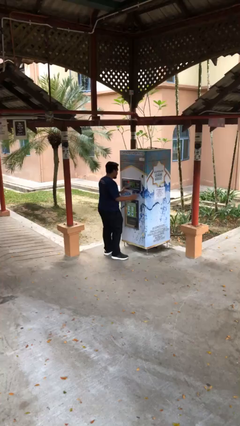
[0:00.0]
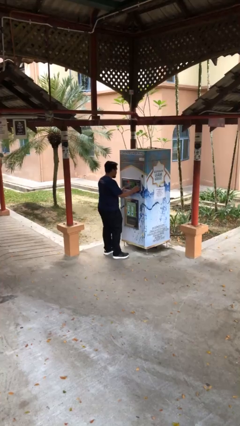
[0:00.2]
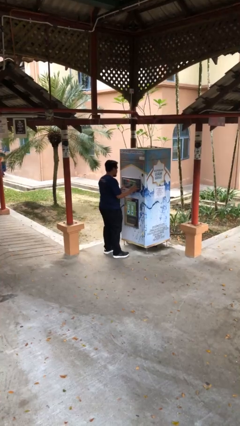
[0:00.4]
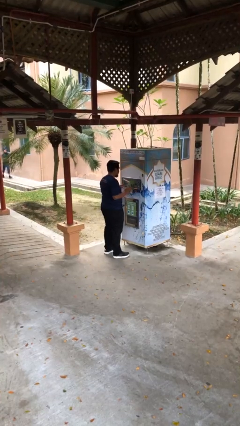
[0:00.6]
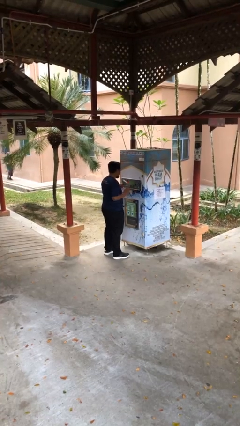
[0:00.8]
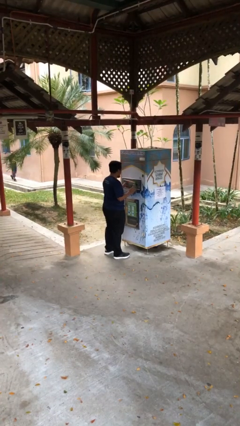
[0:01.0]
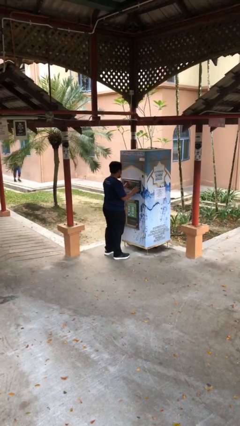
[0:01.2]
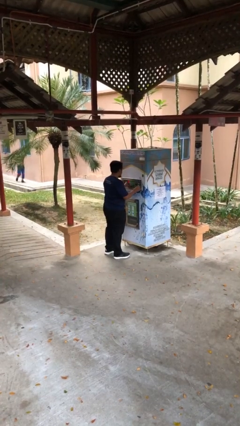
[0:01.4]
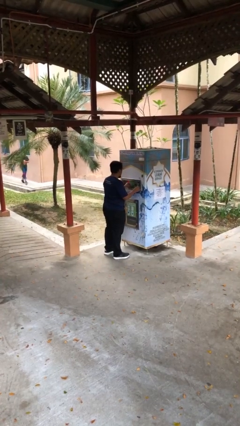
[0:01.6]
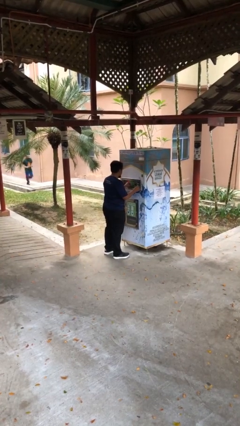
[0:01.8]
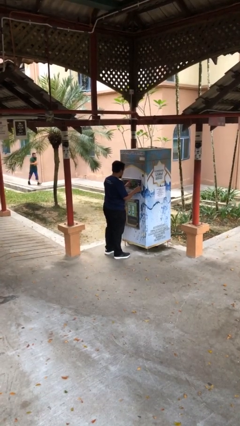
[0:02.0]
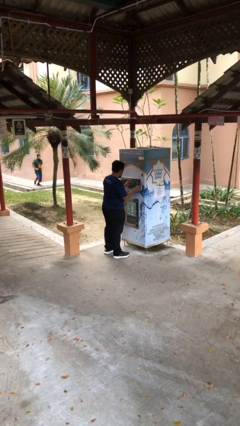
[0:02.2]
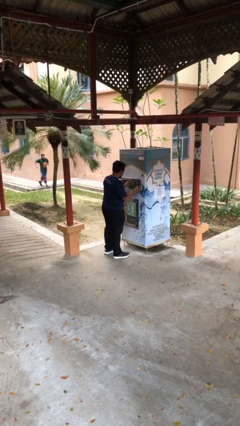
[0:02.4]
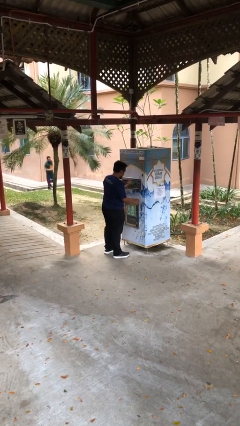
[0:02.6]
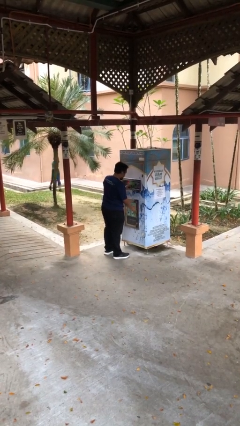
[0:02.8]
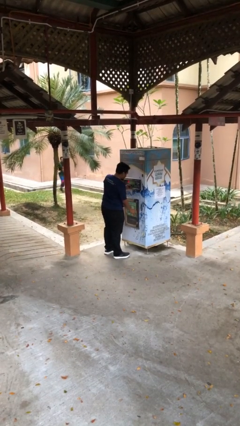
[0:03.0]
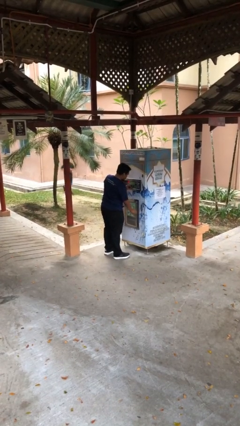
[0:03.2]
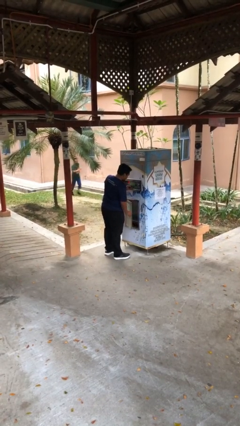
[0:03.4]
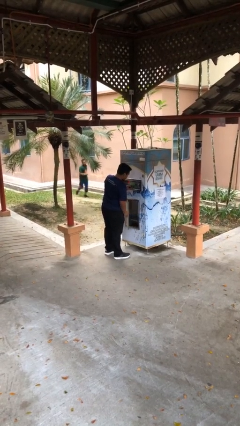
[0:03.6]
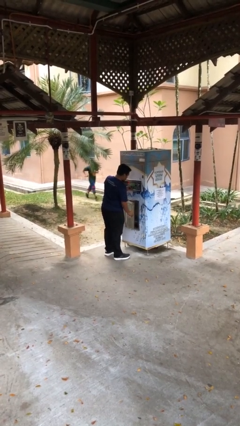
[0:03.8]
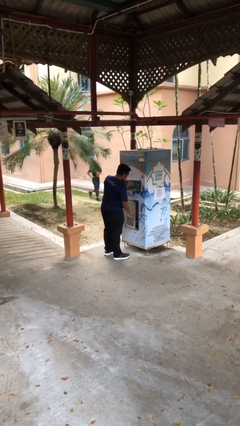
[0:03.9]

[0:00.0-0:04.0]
person purchases from machine

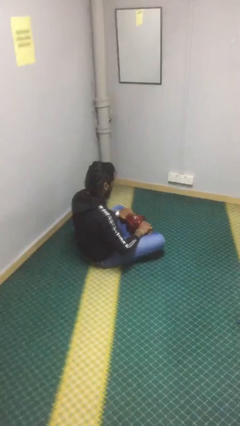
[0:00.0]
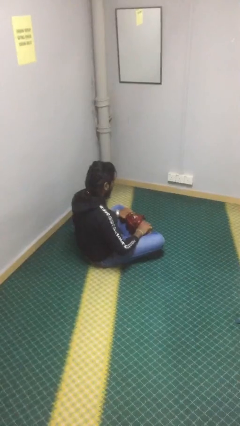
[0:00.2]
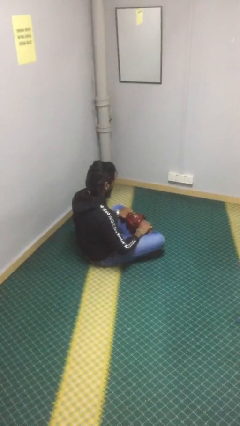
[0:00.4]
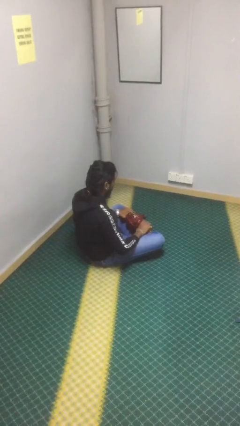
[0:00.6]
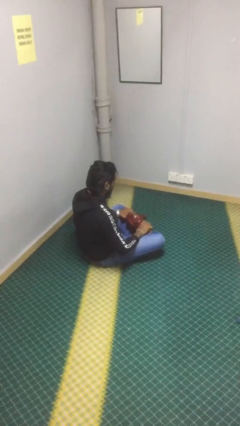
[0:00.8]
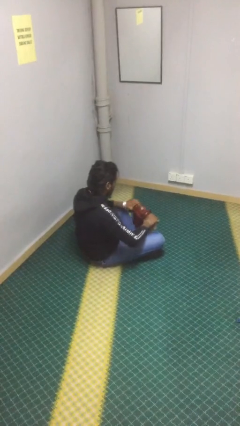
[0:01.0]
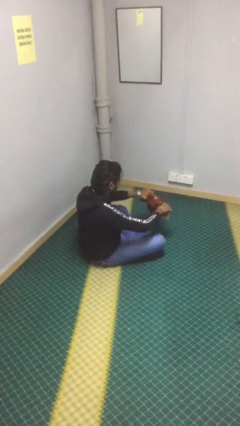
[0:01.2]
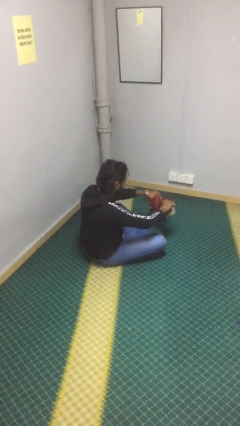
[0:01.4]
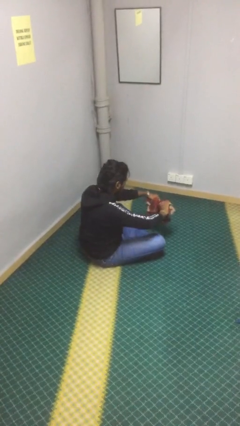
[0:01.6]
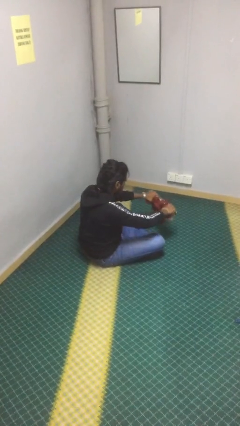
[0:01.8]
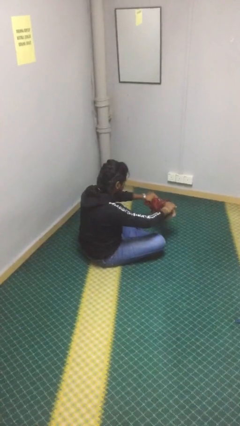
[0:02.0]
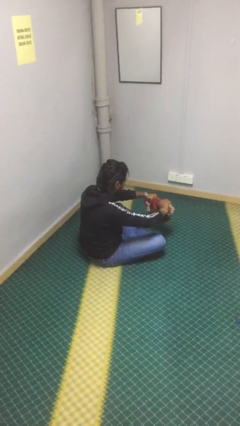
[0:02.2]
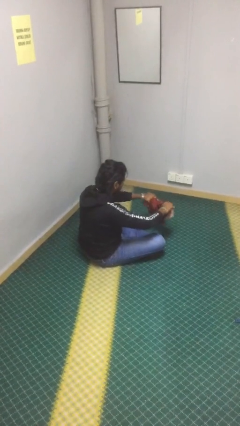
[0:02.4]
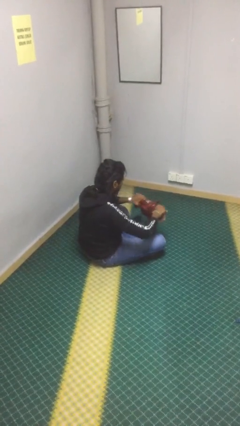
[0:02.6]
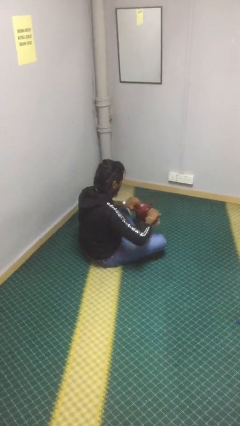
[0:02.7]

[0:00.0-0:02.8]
person squeezes object

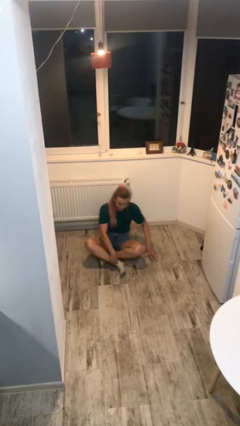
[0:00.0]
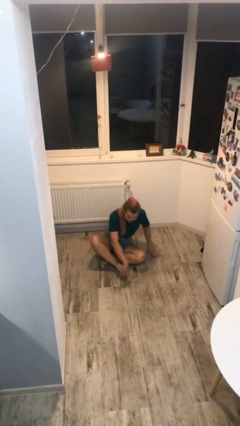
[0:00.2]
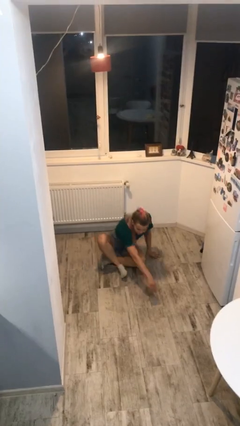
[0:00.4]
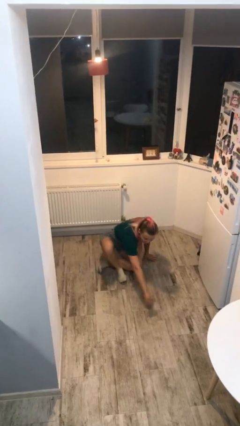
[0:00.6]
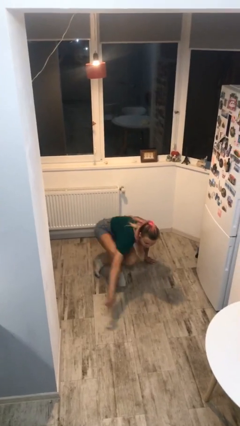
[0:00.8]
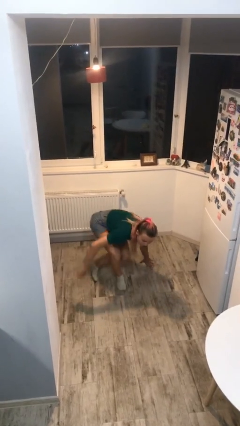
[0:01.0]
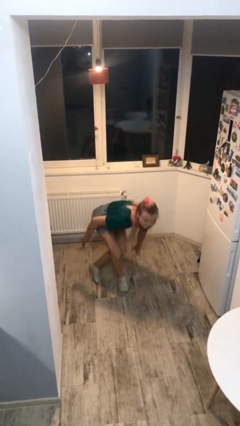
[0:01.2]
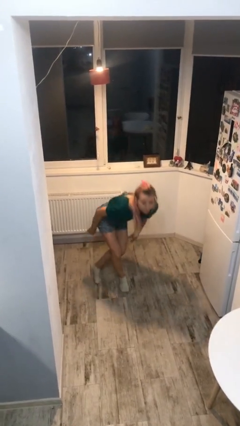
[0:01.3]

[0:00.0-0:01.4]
person stands up from floor

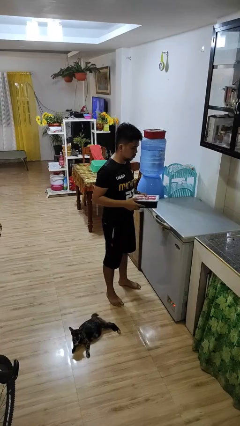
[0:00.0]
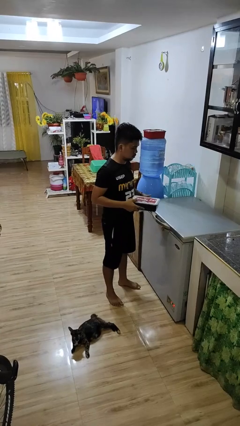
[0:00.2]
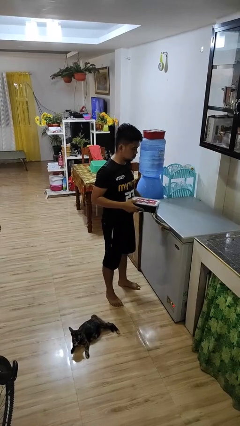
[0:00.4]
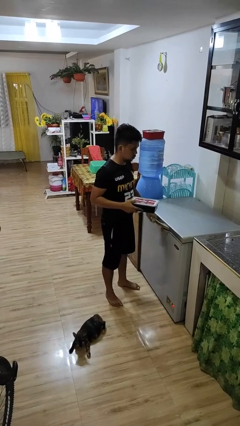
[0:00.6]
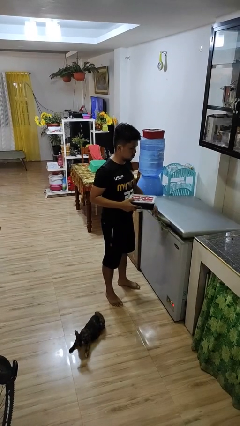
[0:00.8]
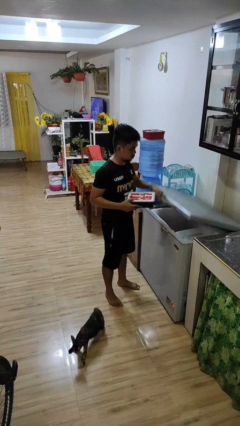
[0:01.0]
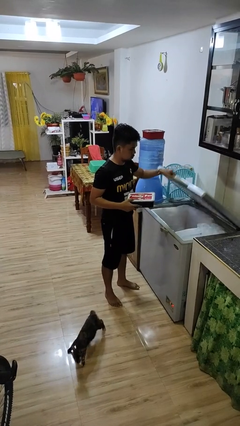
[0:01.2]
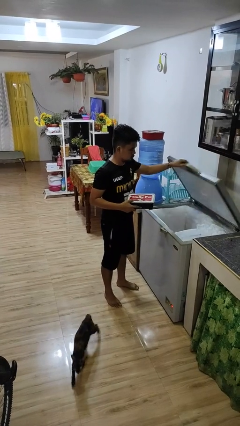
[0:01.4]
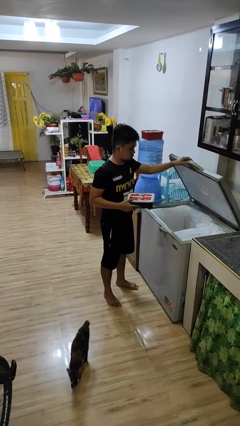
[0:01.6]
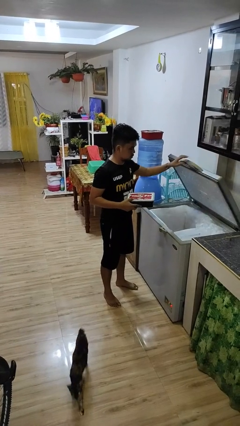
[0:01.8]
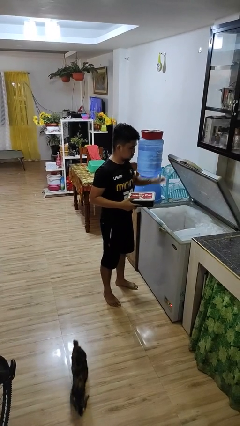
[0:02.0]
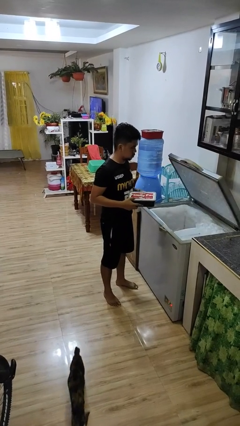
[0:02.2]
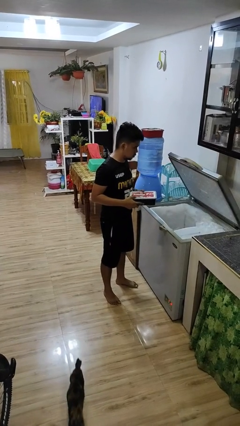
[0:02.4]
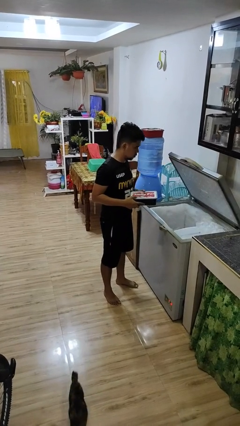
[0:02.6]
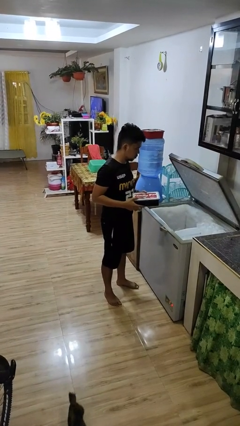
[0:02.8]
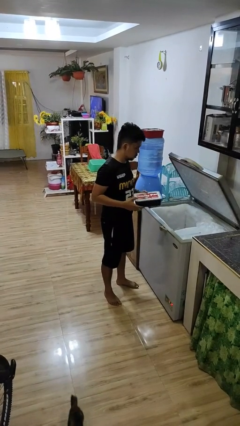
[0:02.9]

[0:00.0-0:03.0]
person opens refrigerator

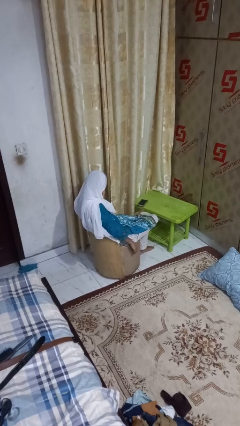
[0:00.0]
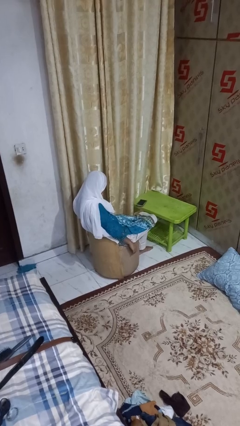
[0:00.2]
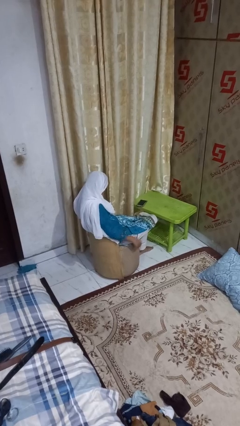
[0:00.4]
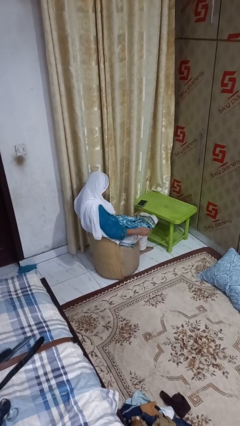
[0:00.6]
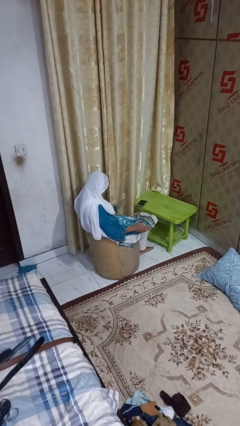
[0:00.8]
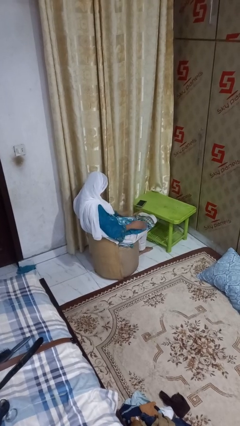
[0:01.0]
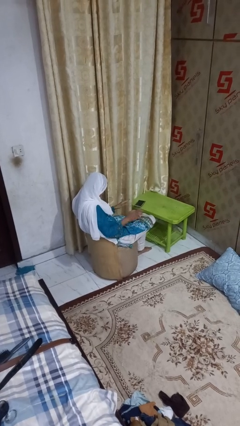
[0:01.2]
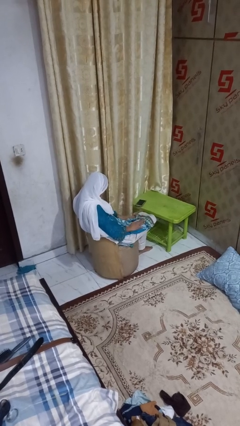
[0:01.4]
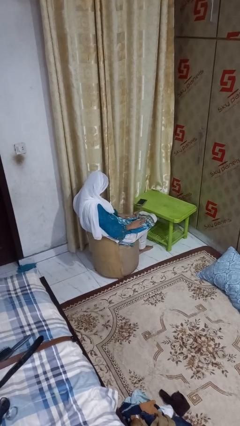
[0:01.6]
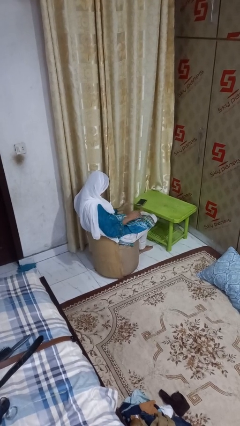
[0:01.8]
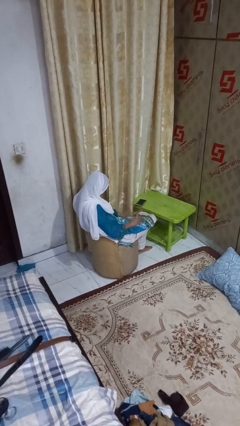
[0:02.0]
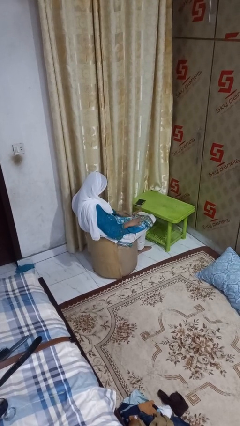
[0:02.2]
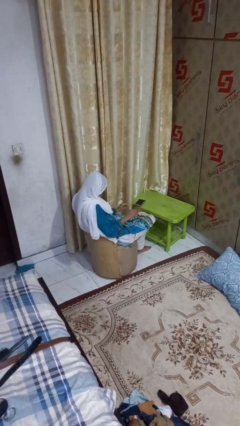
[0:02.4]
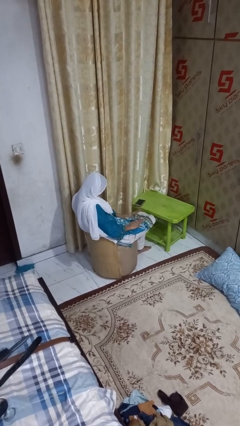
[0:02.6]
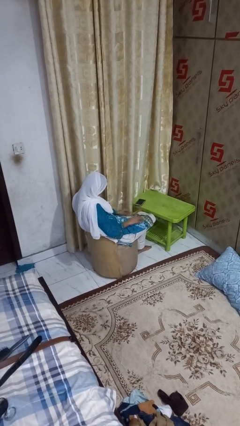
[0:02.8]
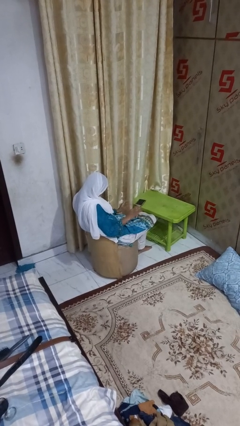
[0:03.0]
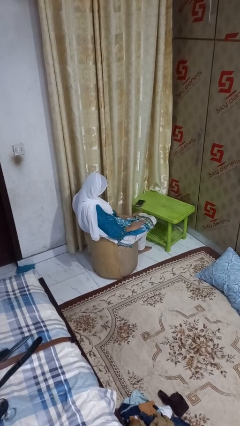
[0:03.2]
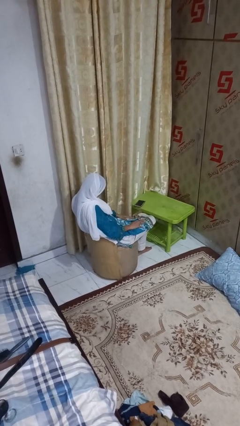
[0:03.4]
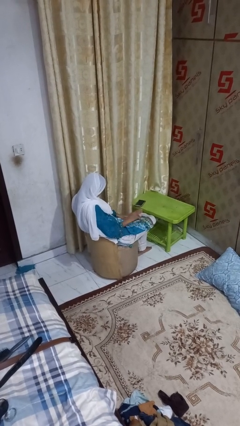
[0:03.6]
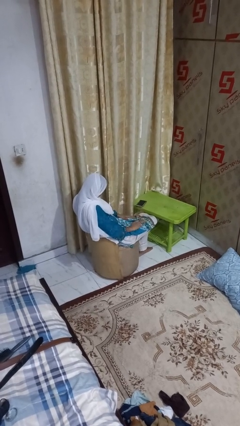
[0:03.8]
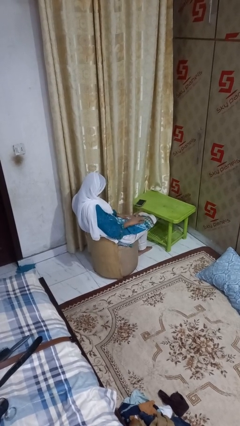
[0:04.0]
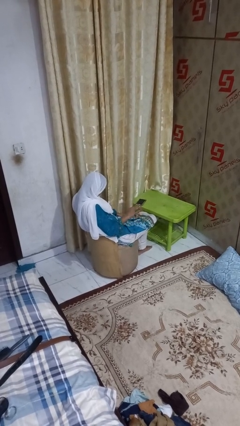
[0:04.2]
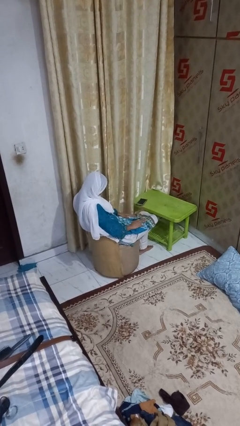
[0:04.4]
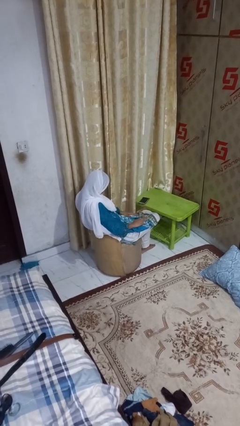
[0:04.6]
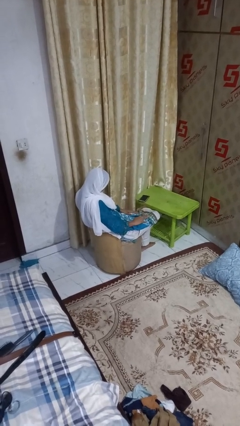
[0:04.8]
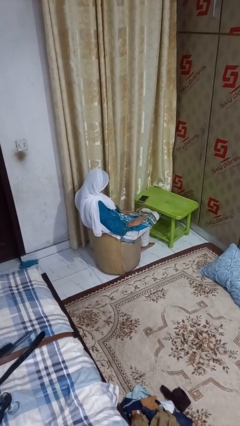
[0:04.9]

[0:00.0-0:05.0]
person slaps hands on thighs

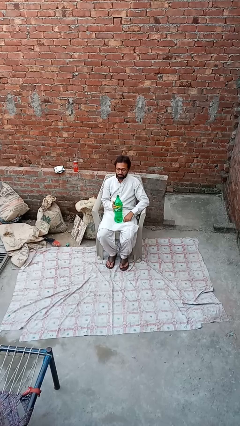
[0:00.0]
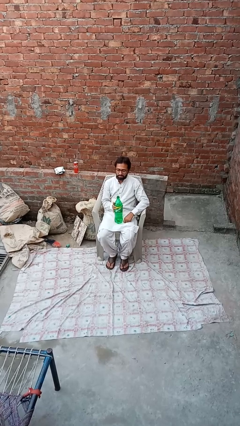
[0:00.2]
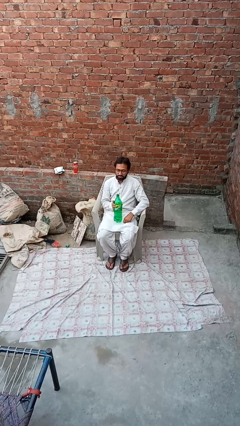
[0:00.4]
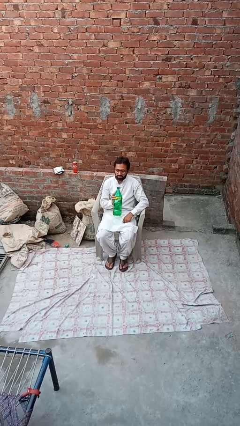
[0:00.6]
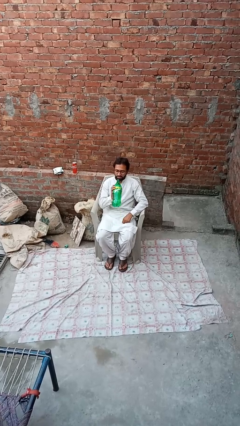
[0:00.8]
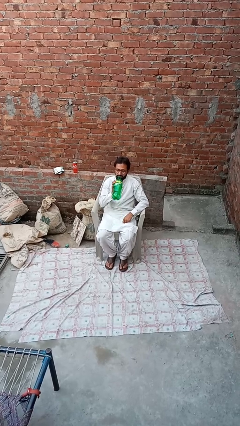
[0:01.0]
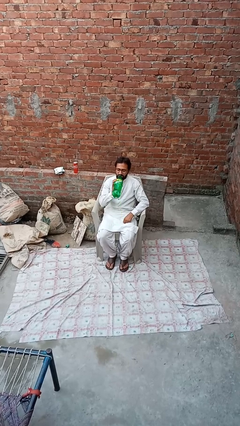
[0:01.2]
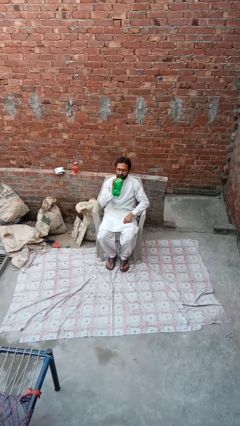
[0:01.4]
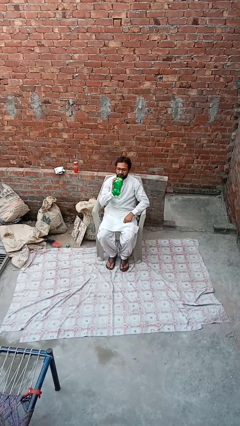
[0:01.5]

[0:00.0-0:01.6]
person drinks from bottle
